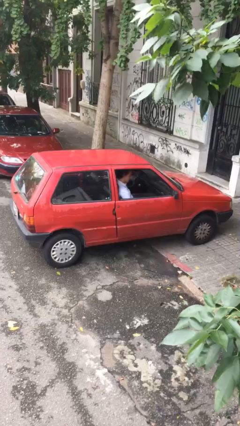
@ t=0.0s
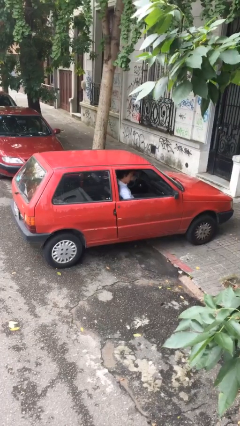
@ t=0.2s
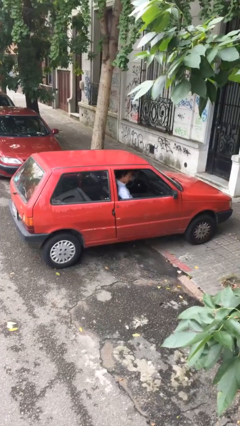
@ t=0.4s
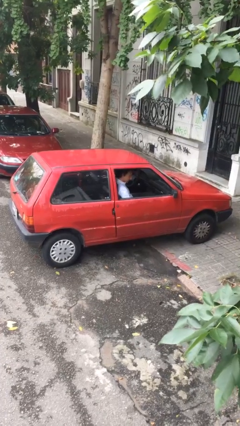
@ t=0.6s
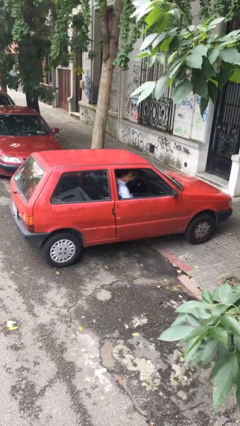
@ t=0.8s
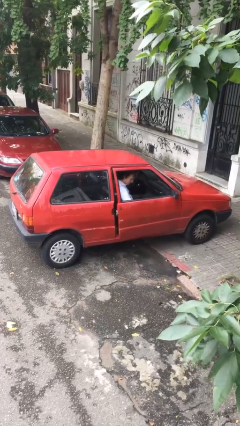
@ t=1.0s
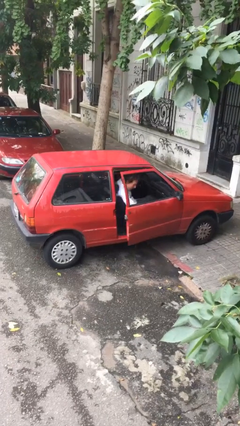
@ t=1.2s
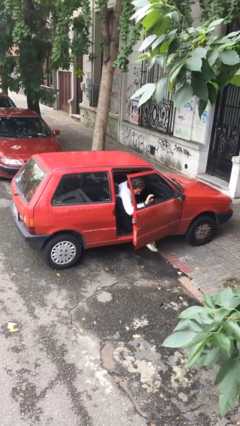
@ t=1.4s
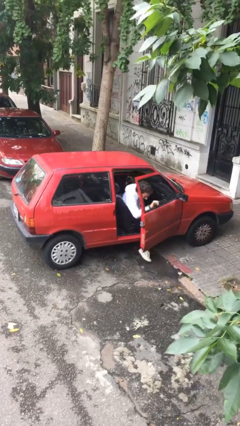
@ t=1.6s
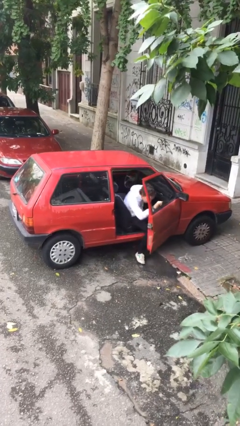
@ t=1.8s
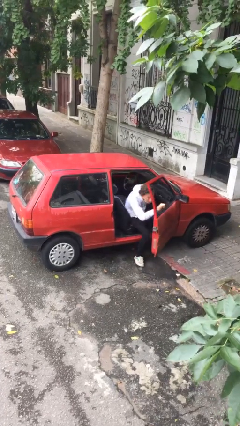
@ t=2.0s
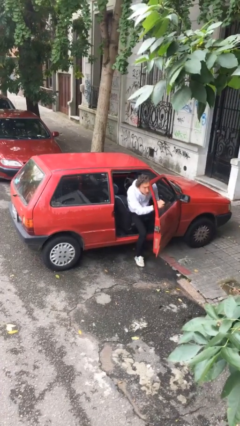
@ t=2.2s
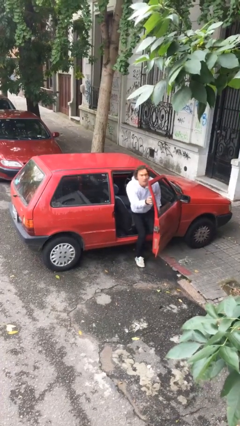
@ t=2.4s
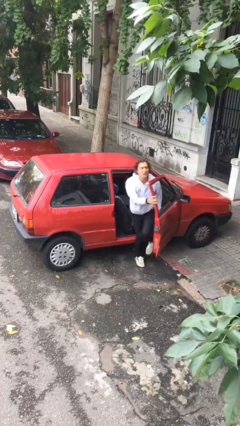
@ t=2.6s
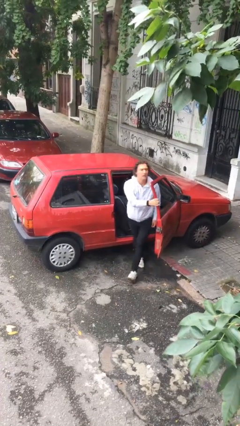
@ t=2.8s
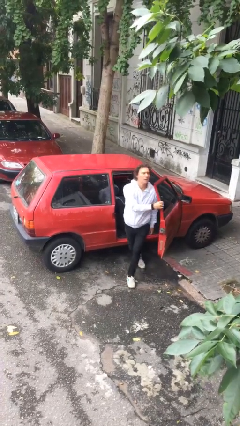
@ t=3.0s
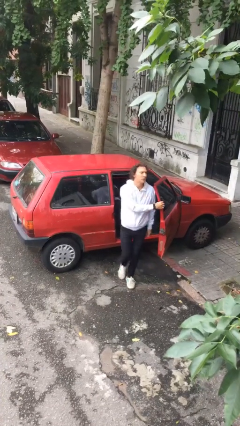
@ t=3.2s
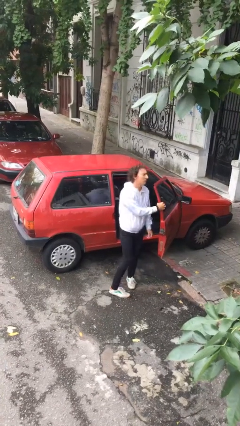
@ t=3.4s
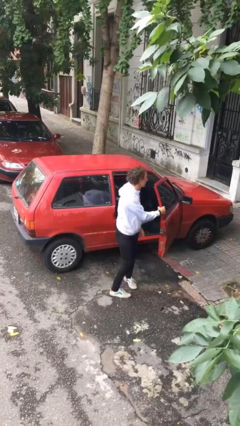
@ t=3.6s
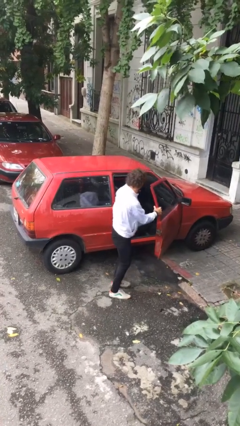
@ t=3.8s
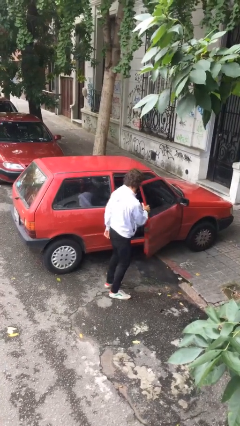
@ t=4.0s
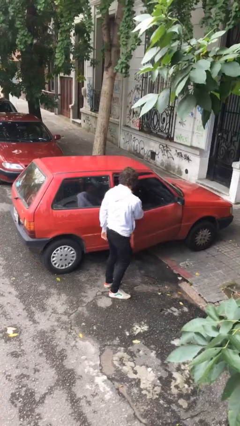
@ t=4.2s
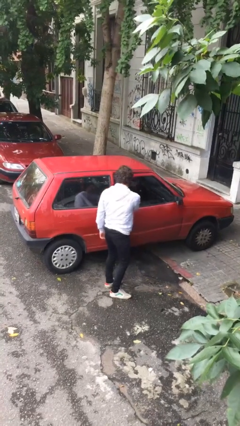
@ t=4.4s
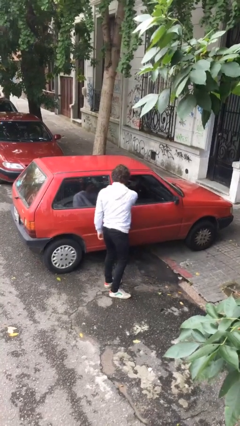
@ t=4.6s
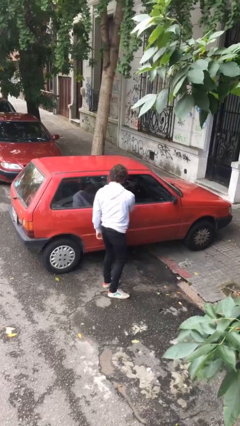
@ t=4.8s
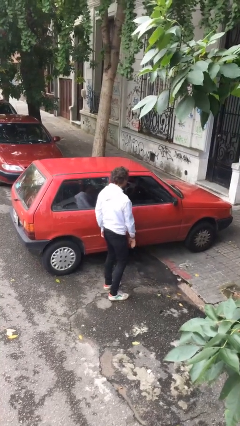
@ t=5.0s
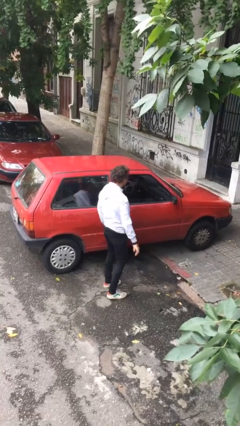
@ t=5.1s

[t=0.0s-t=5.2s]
car drops off person

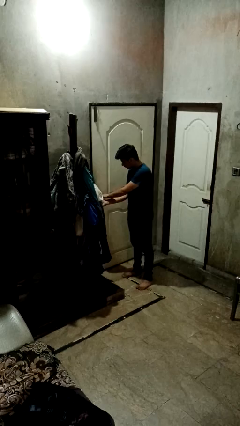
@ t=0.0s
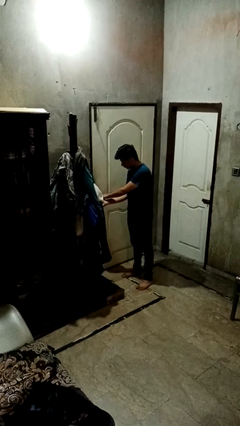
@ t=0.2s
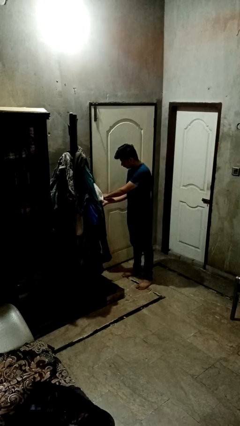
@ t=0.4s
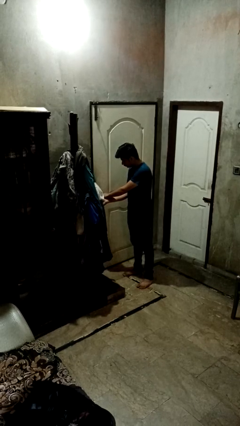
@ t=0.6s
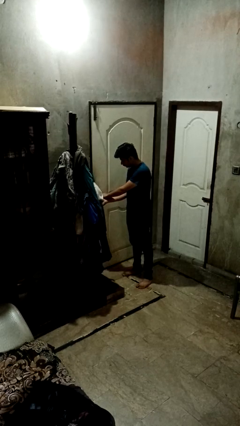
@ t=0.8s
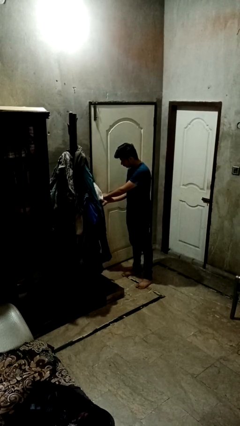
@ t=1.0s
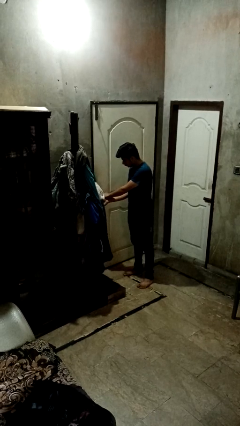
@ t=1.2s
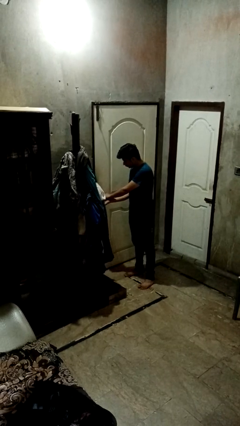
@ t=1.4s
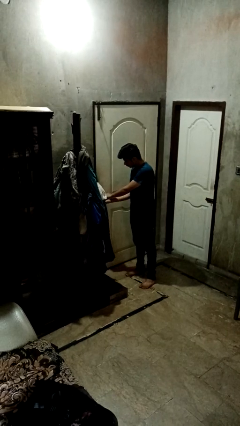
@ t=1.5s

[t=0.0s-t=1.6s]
person unlocks door with keys

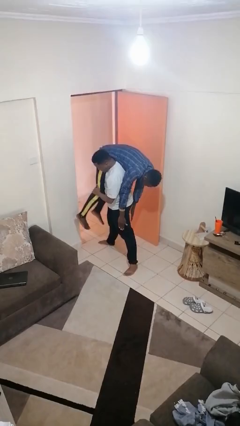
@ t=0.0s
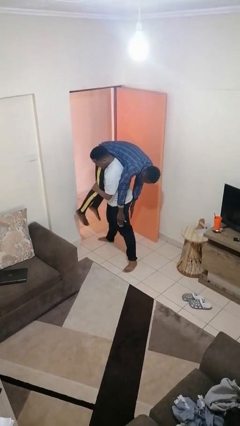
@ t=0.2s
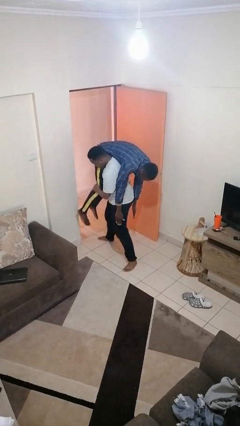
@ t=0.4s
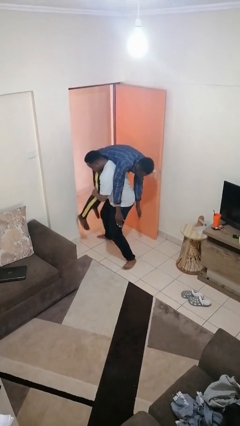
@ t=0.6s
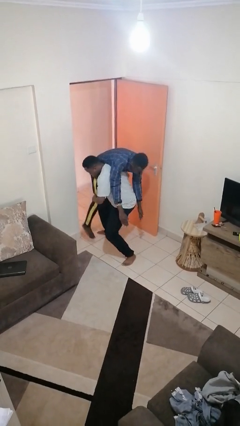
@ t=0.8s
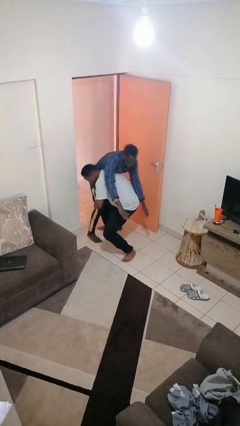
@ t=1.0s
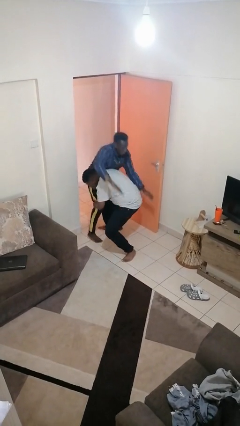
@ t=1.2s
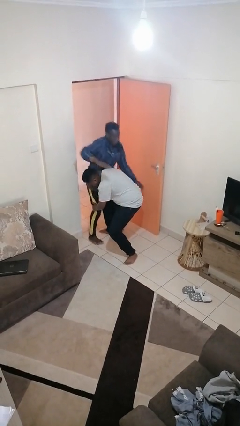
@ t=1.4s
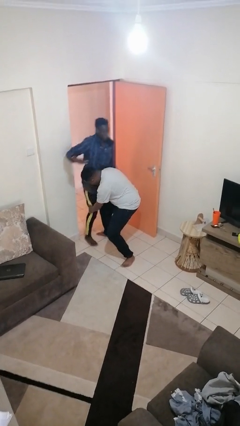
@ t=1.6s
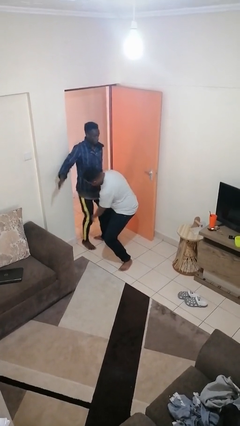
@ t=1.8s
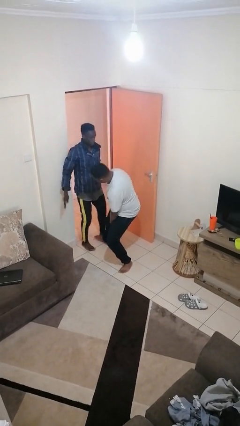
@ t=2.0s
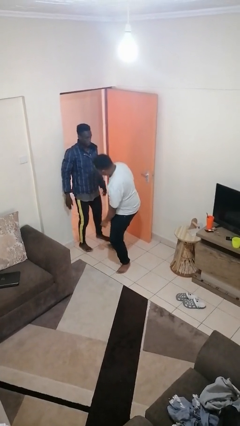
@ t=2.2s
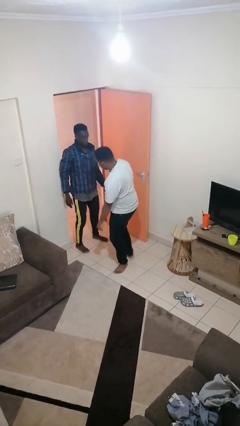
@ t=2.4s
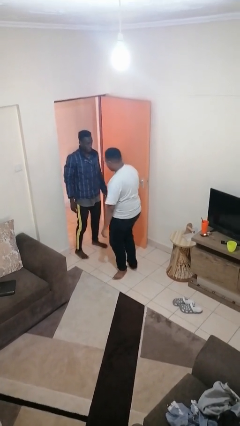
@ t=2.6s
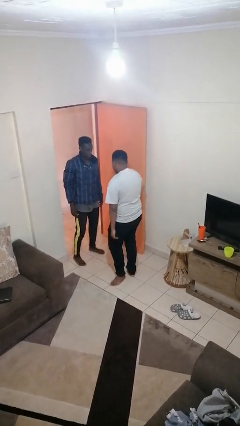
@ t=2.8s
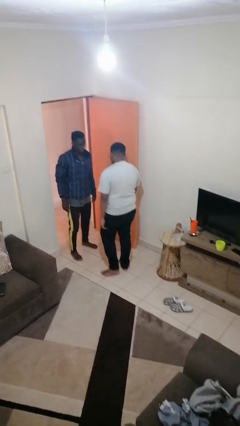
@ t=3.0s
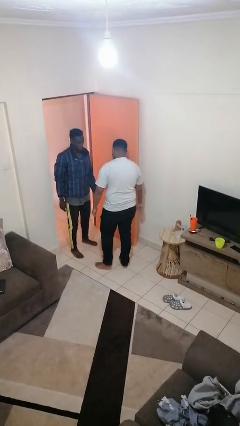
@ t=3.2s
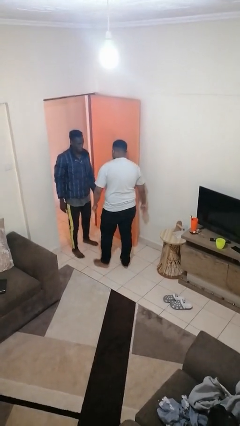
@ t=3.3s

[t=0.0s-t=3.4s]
person puts down person

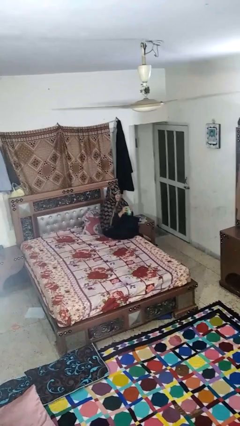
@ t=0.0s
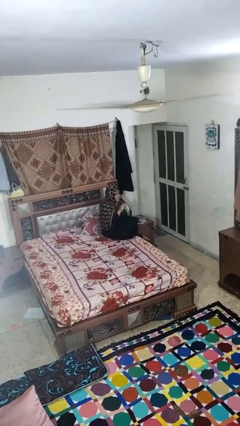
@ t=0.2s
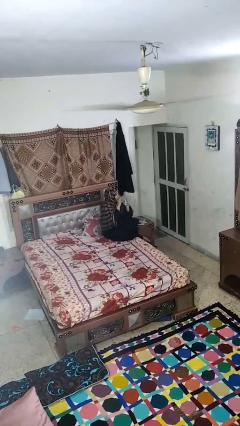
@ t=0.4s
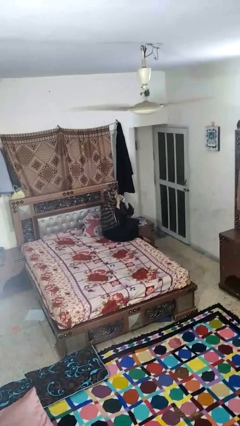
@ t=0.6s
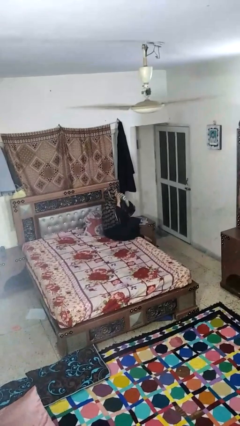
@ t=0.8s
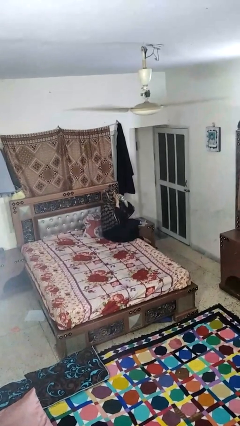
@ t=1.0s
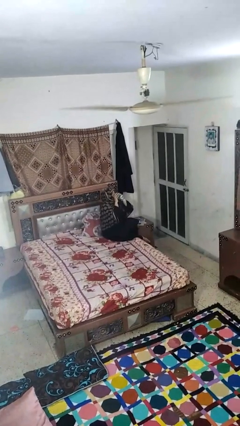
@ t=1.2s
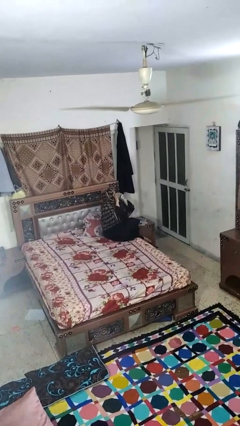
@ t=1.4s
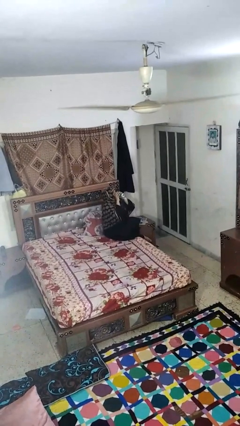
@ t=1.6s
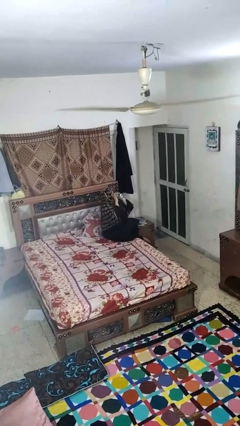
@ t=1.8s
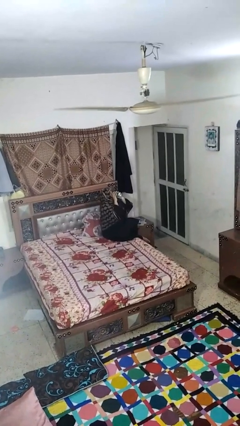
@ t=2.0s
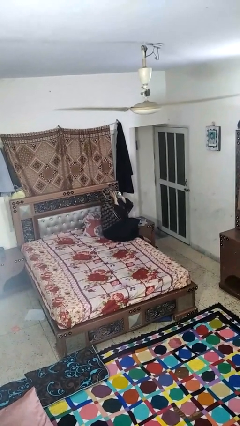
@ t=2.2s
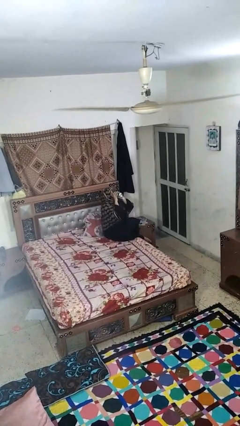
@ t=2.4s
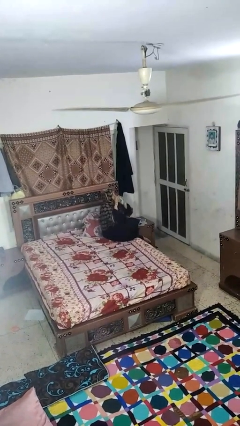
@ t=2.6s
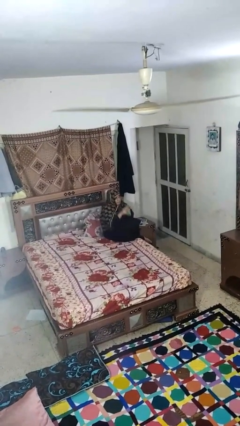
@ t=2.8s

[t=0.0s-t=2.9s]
person drinks from beverage can

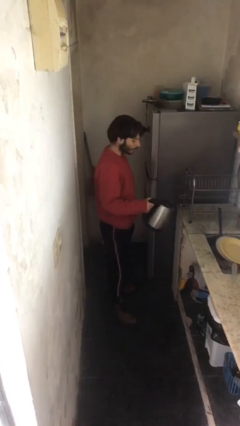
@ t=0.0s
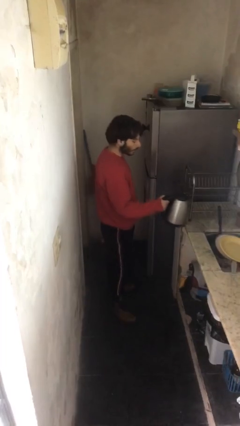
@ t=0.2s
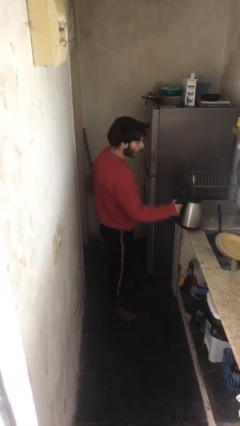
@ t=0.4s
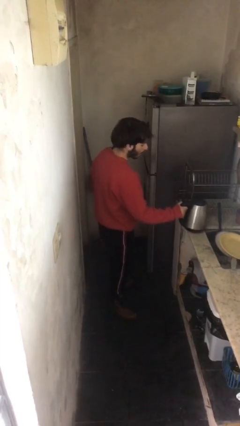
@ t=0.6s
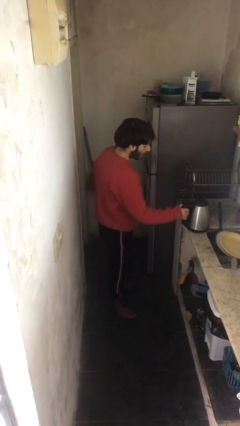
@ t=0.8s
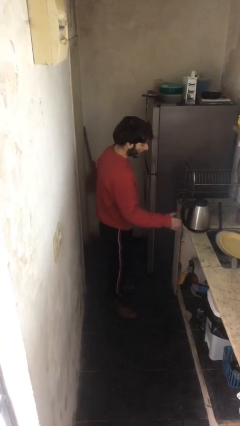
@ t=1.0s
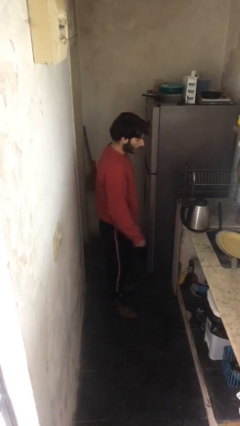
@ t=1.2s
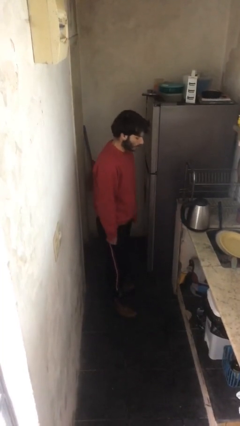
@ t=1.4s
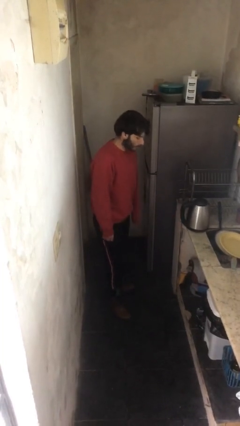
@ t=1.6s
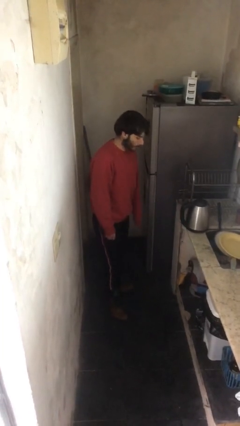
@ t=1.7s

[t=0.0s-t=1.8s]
person puts down object on countertop

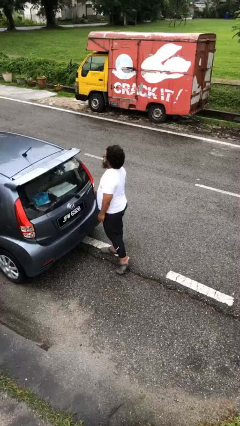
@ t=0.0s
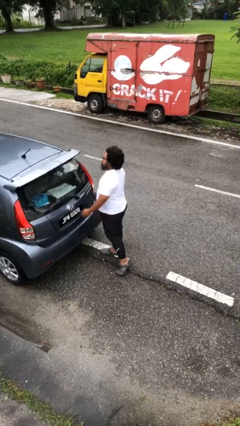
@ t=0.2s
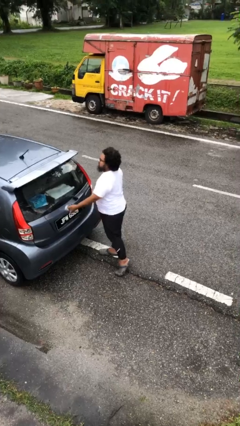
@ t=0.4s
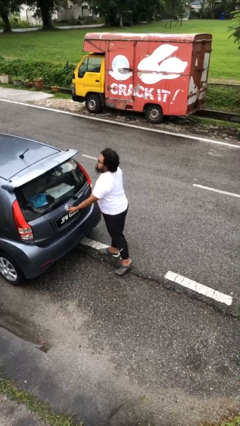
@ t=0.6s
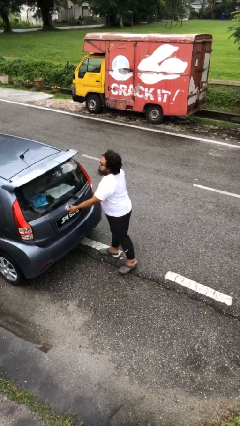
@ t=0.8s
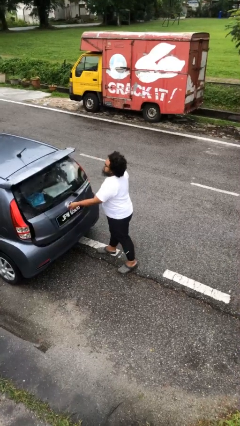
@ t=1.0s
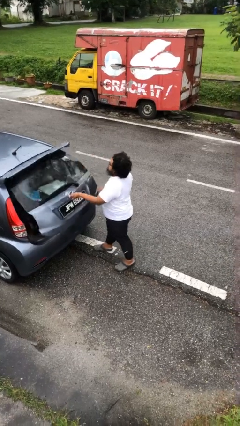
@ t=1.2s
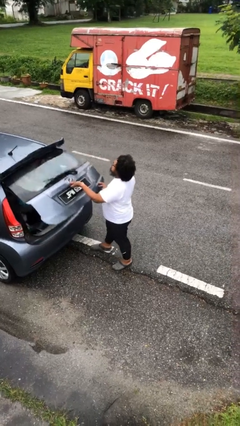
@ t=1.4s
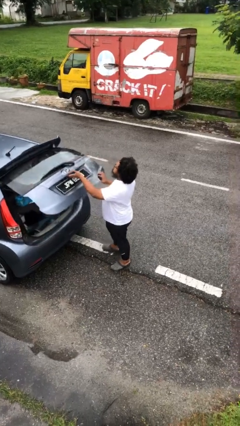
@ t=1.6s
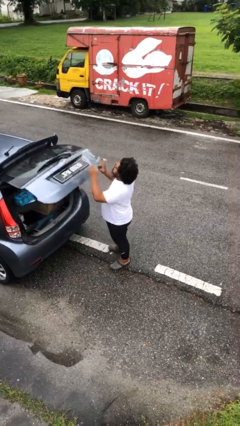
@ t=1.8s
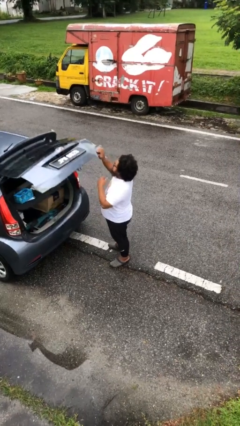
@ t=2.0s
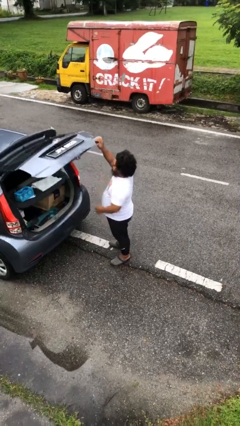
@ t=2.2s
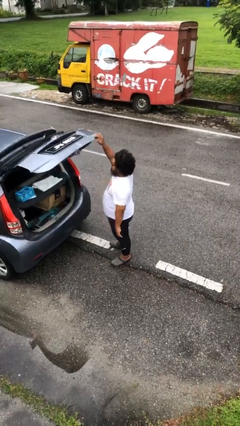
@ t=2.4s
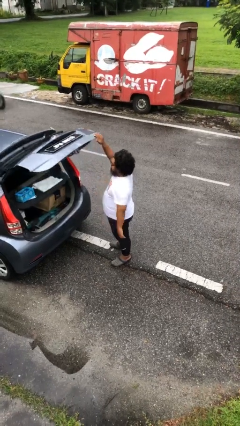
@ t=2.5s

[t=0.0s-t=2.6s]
person opens car trunk
